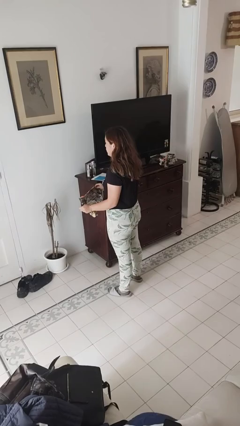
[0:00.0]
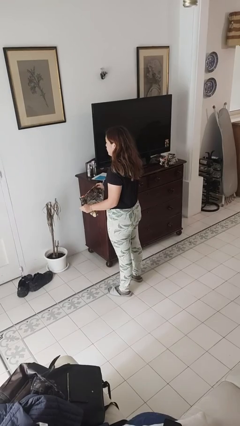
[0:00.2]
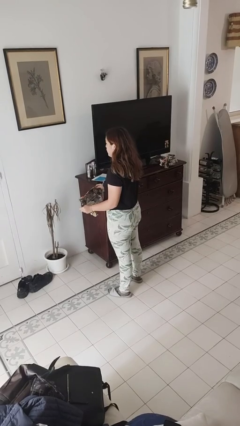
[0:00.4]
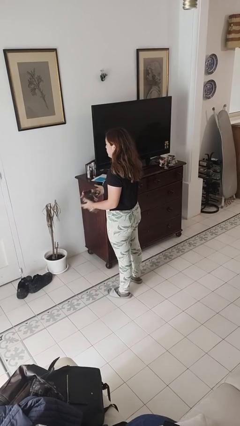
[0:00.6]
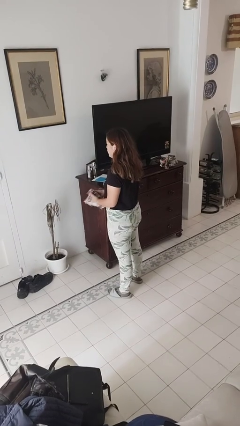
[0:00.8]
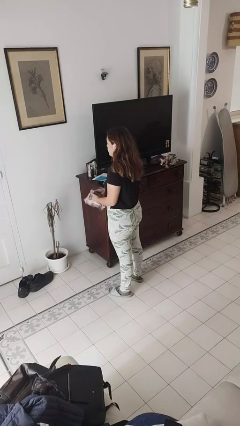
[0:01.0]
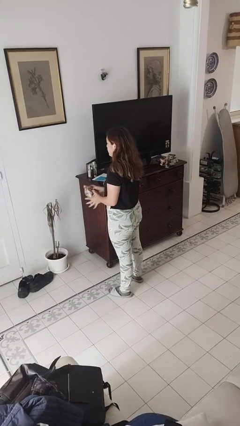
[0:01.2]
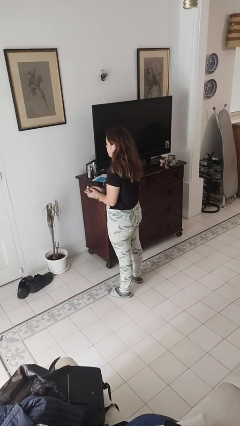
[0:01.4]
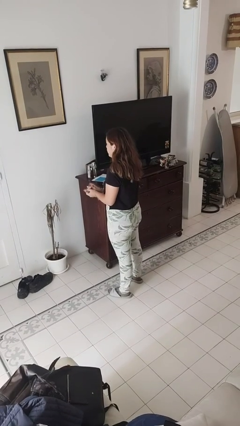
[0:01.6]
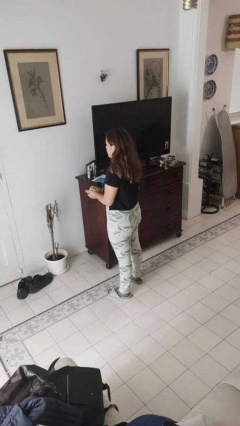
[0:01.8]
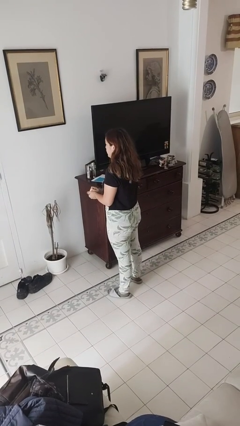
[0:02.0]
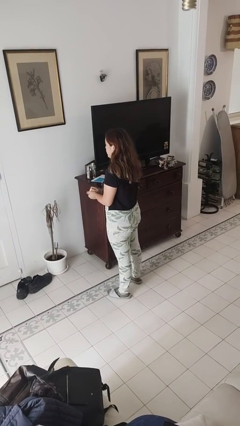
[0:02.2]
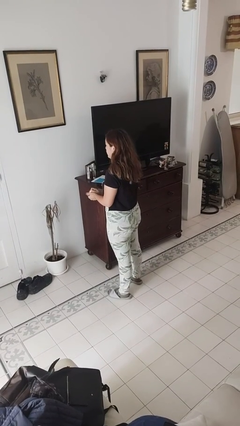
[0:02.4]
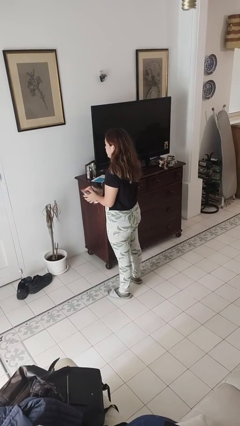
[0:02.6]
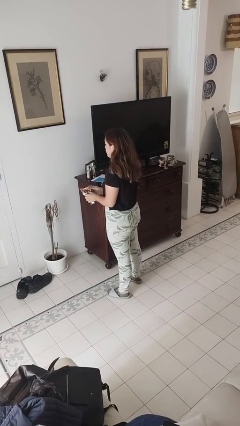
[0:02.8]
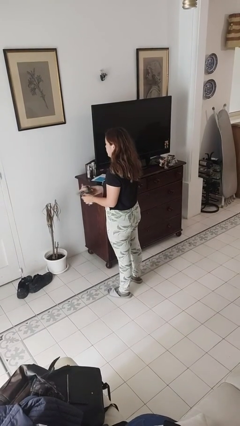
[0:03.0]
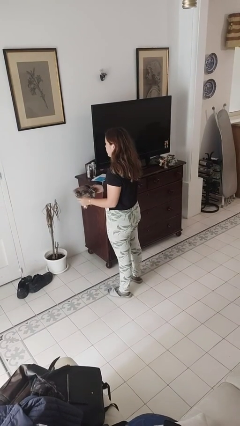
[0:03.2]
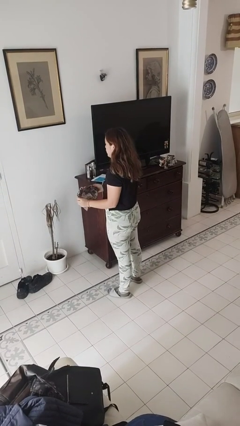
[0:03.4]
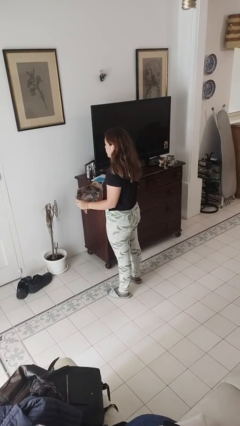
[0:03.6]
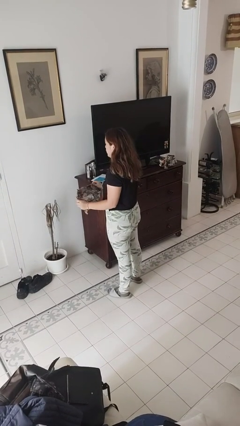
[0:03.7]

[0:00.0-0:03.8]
person crumples paper

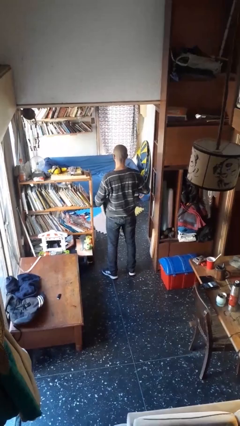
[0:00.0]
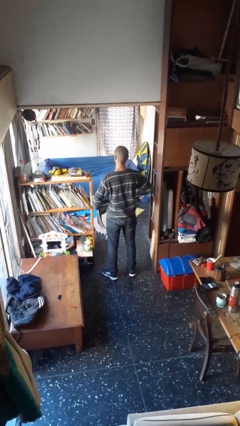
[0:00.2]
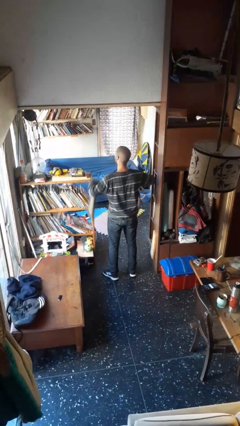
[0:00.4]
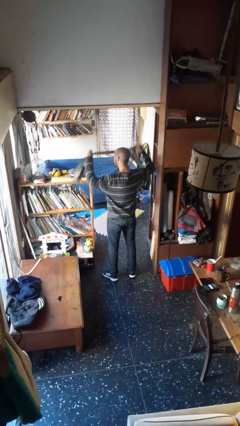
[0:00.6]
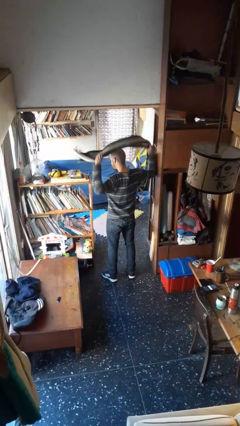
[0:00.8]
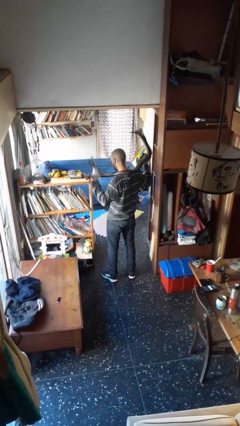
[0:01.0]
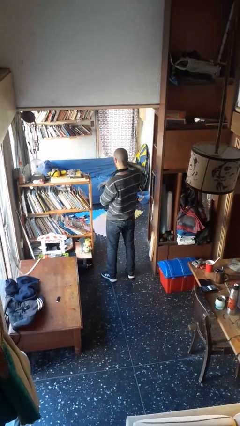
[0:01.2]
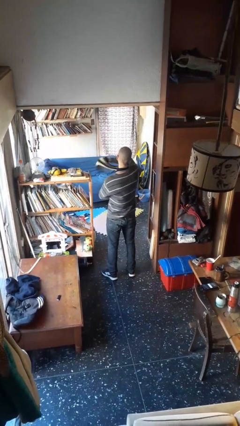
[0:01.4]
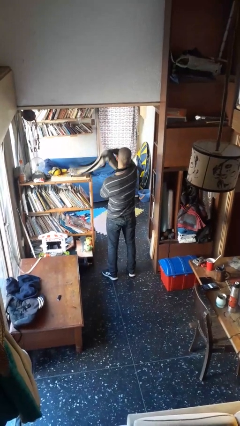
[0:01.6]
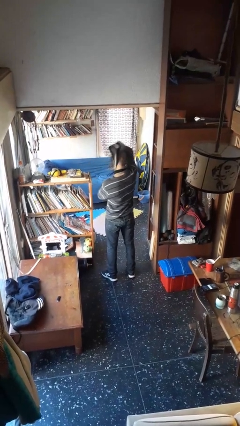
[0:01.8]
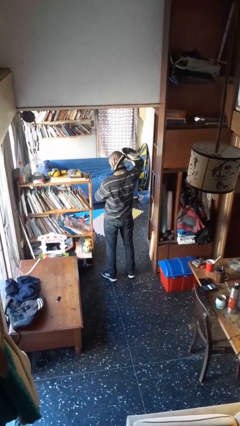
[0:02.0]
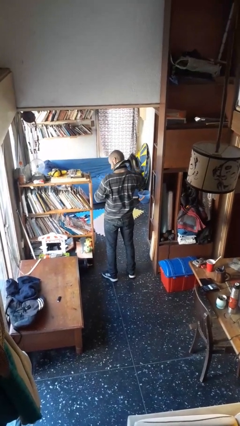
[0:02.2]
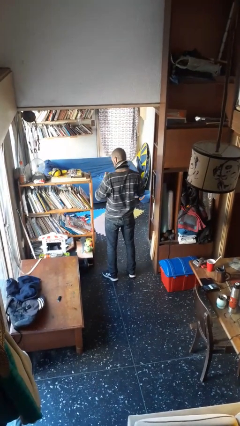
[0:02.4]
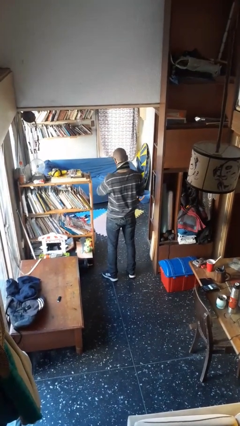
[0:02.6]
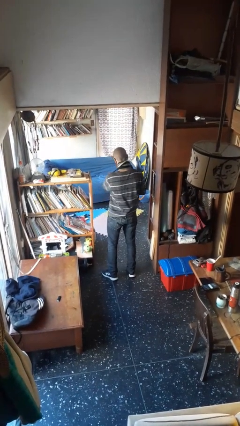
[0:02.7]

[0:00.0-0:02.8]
person puts on scarf

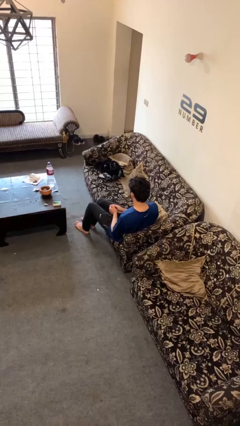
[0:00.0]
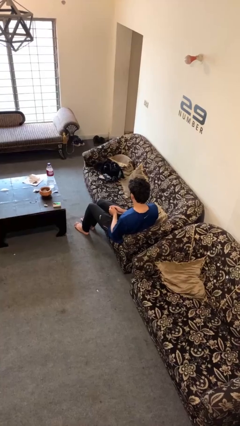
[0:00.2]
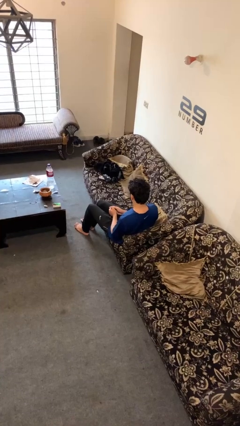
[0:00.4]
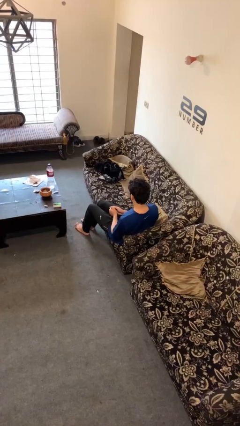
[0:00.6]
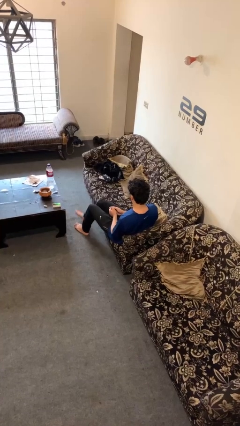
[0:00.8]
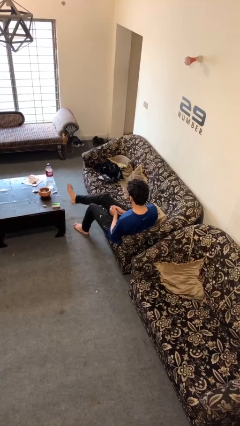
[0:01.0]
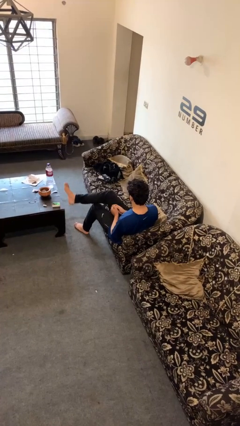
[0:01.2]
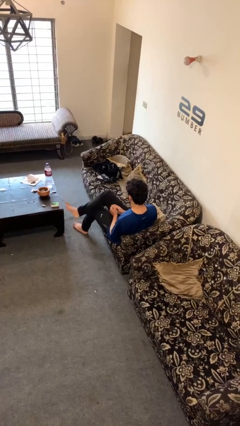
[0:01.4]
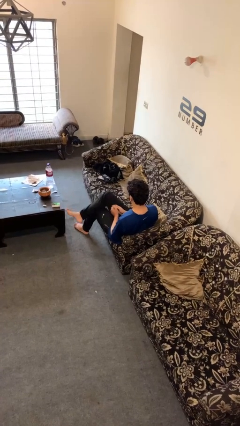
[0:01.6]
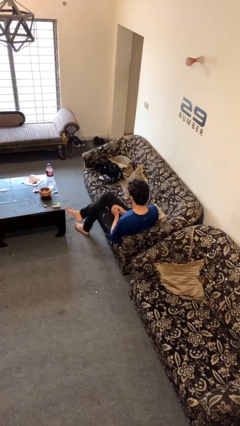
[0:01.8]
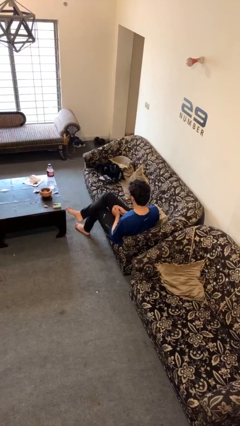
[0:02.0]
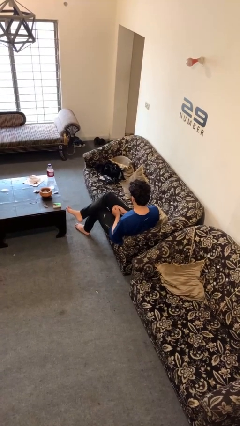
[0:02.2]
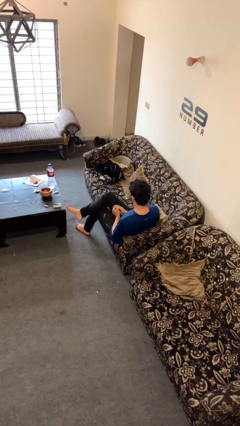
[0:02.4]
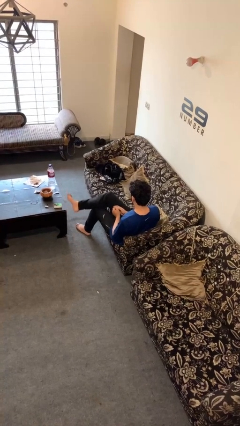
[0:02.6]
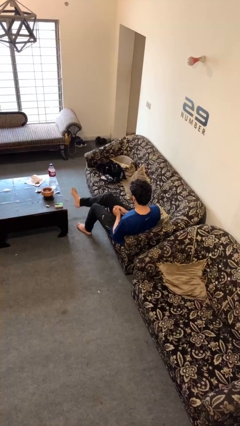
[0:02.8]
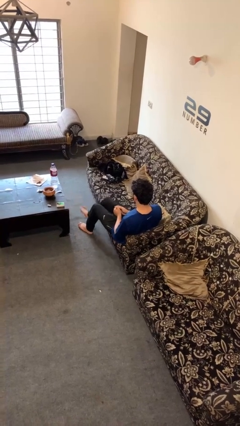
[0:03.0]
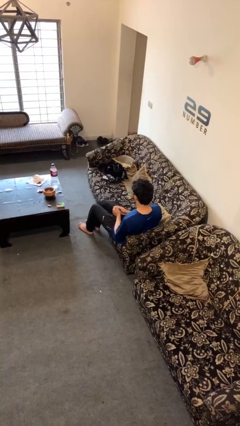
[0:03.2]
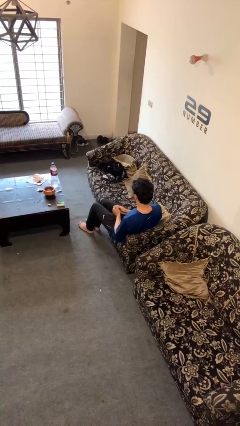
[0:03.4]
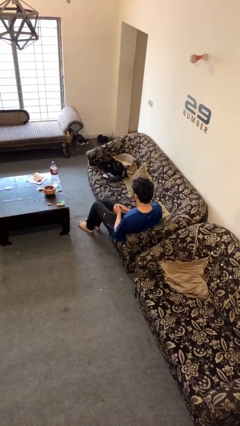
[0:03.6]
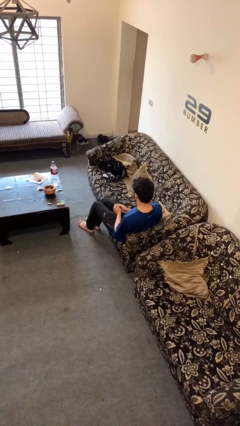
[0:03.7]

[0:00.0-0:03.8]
person crosses legs

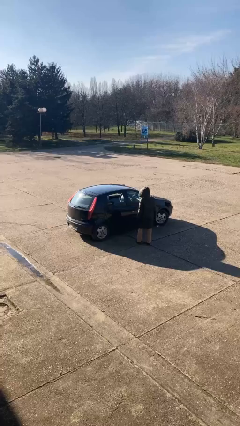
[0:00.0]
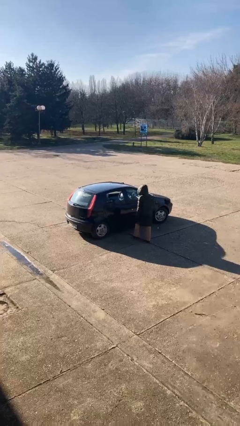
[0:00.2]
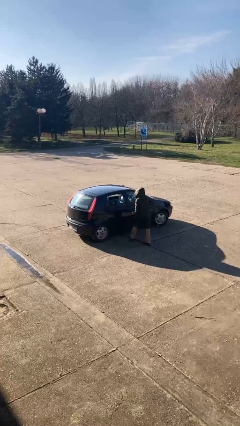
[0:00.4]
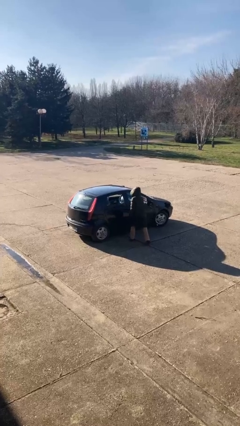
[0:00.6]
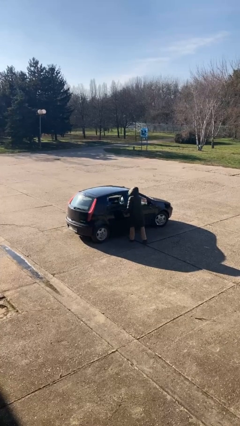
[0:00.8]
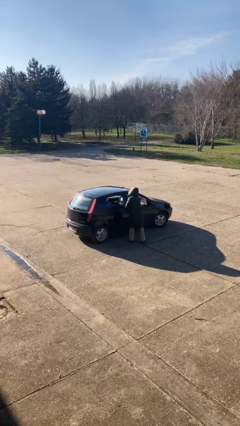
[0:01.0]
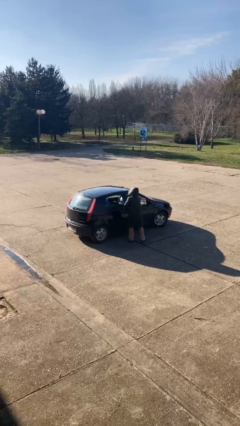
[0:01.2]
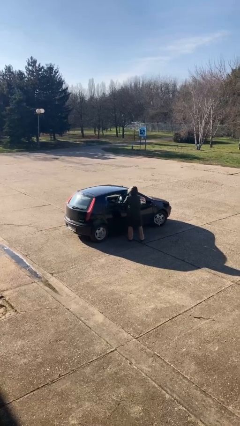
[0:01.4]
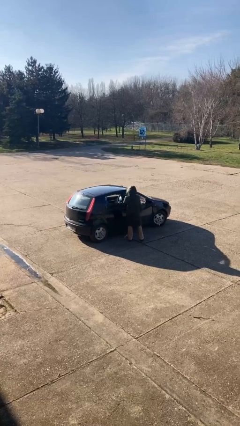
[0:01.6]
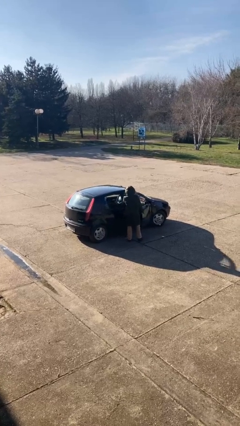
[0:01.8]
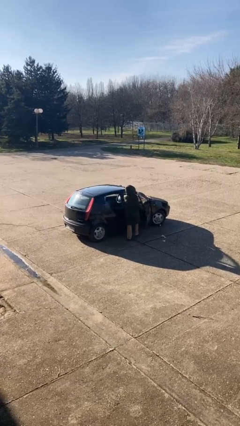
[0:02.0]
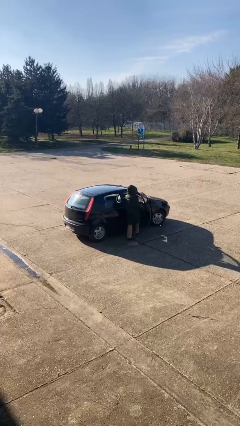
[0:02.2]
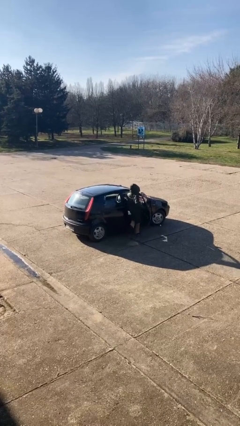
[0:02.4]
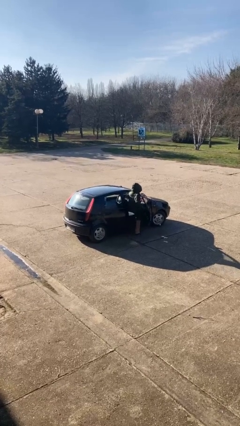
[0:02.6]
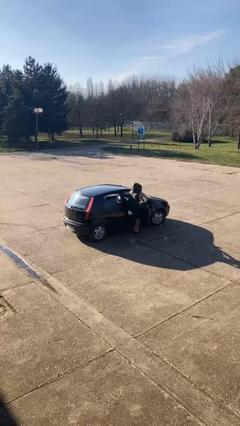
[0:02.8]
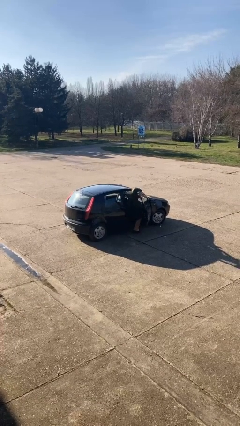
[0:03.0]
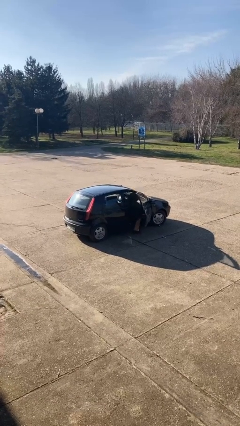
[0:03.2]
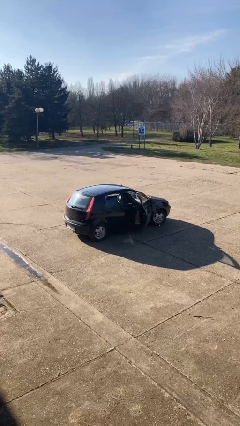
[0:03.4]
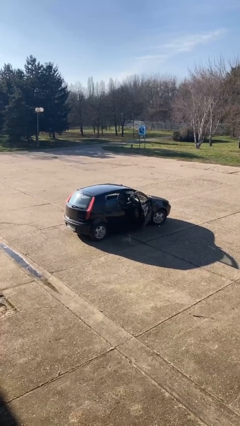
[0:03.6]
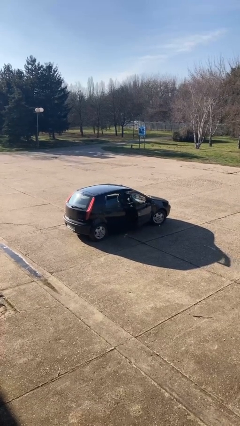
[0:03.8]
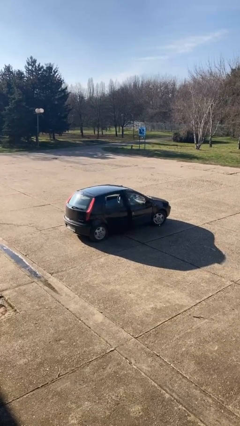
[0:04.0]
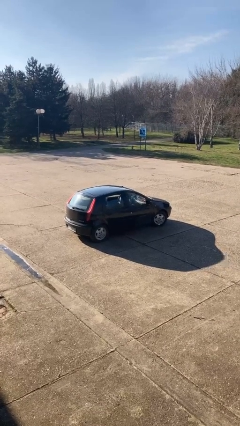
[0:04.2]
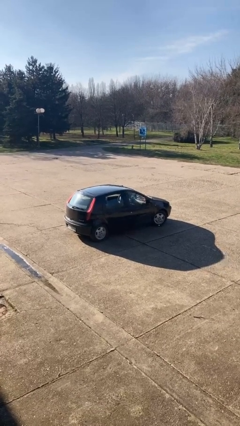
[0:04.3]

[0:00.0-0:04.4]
car picks up person

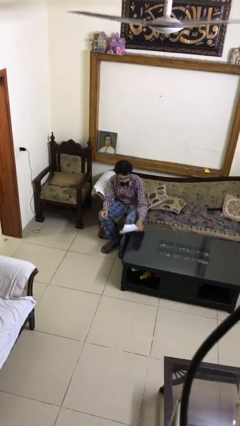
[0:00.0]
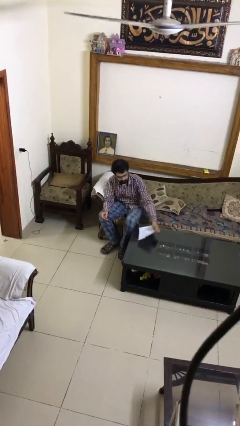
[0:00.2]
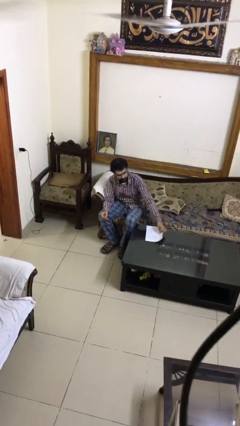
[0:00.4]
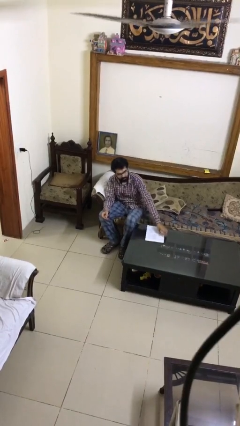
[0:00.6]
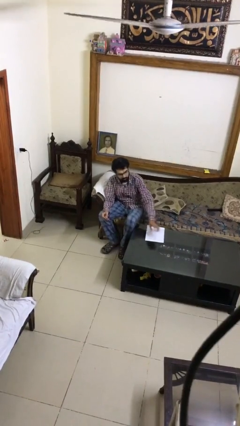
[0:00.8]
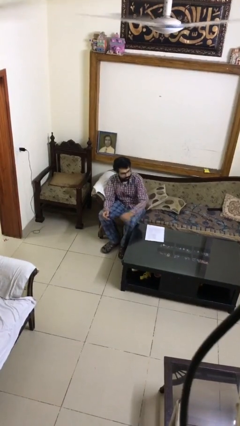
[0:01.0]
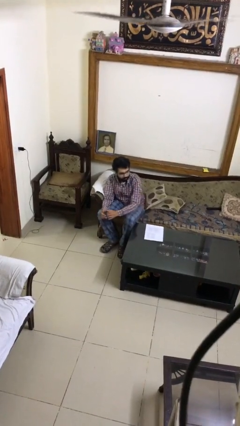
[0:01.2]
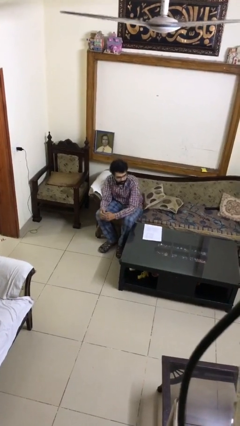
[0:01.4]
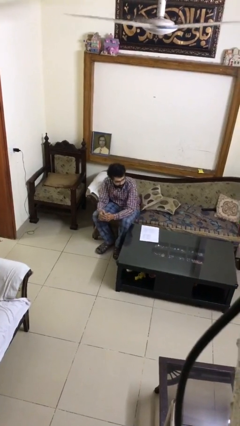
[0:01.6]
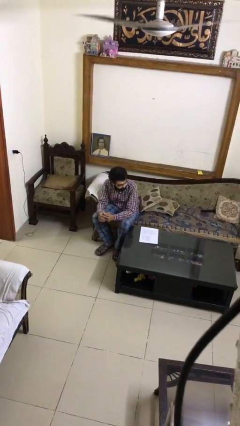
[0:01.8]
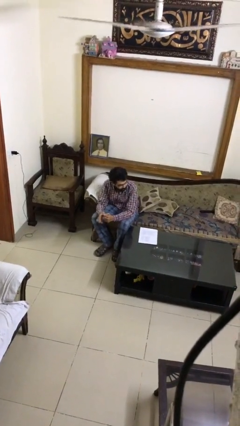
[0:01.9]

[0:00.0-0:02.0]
person puts down object on table

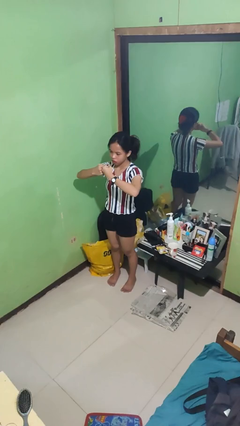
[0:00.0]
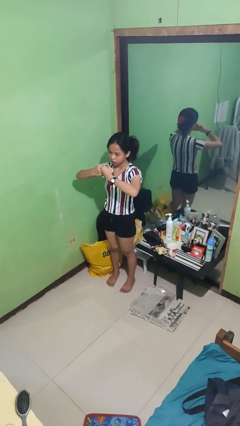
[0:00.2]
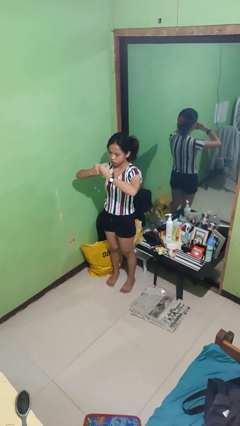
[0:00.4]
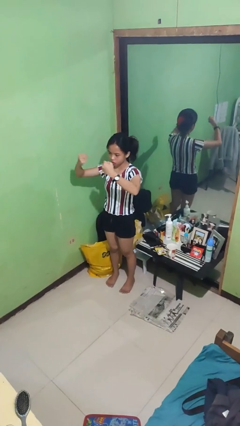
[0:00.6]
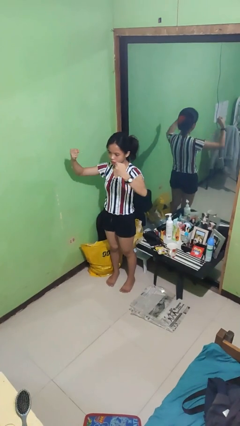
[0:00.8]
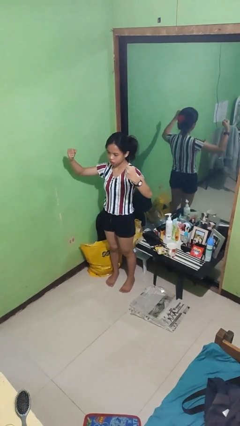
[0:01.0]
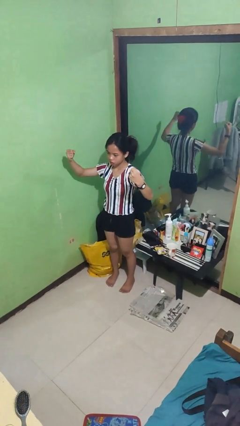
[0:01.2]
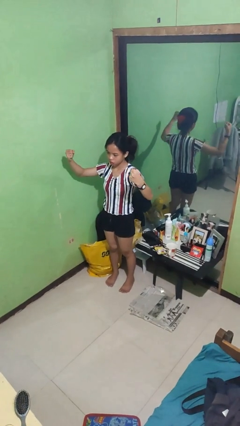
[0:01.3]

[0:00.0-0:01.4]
person gestures zoom in
